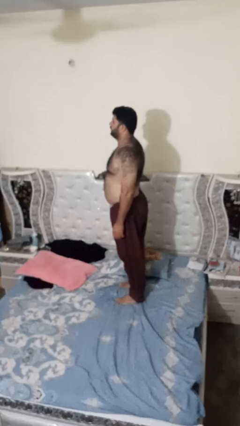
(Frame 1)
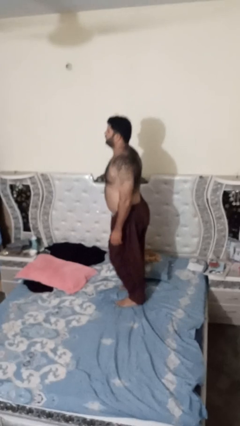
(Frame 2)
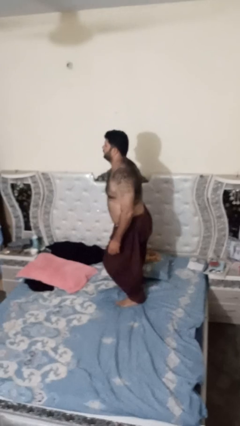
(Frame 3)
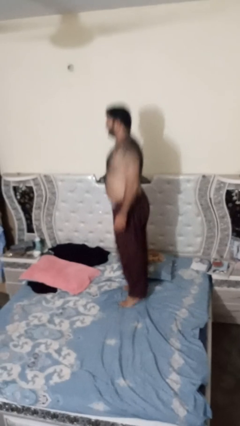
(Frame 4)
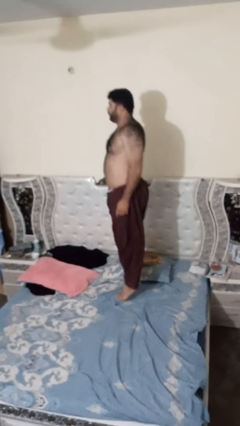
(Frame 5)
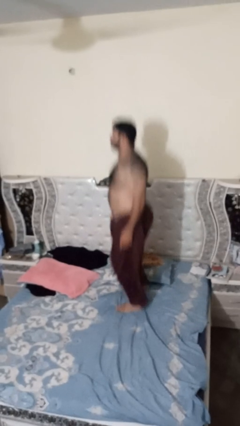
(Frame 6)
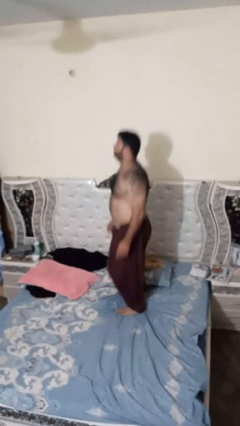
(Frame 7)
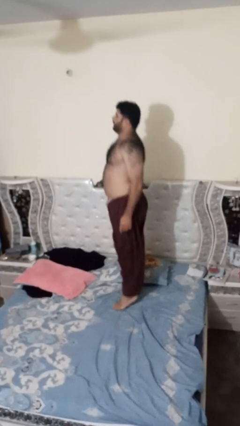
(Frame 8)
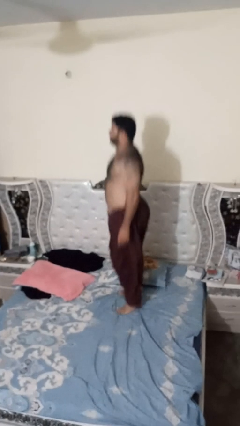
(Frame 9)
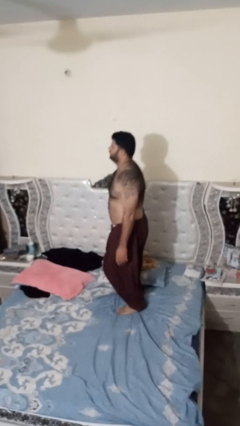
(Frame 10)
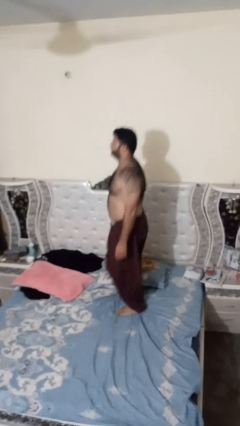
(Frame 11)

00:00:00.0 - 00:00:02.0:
person jumps on bed

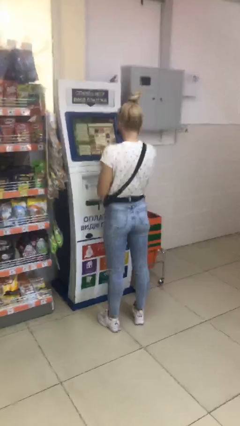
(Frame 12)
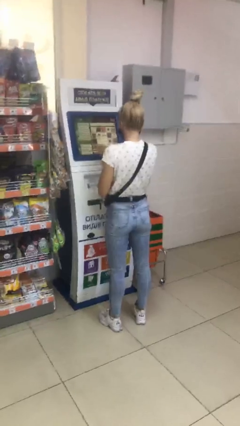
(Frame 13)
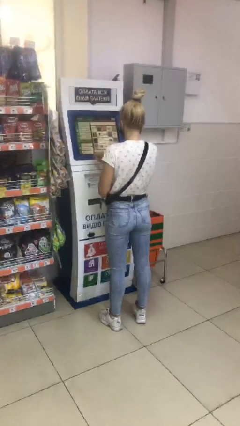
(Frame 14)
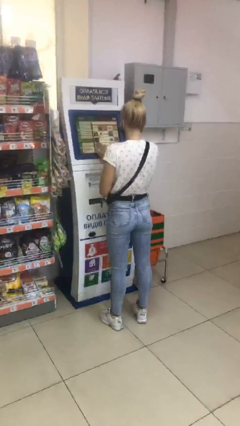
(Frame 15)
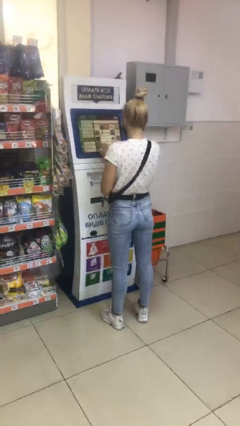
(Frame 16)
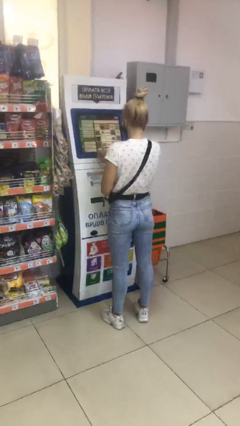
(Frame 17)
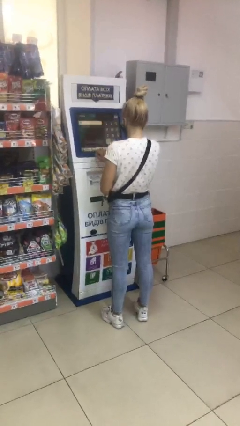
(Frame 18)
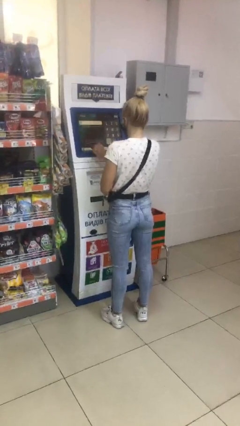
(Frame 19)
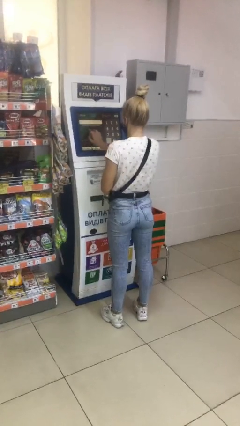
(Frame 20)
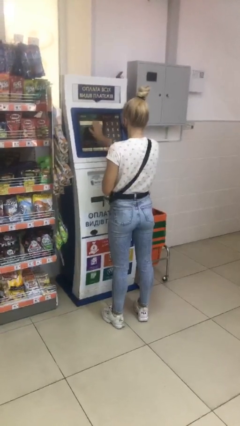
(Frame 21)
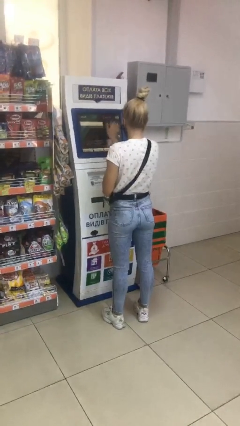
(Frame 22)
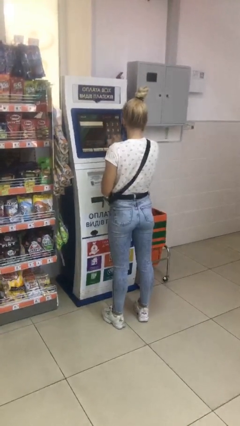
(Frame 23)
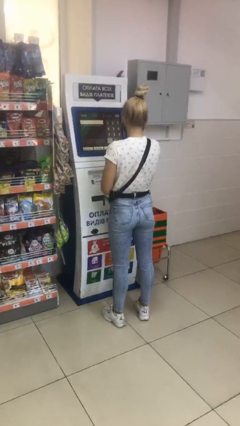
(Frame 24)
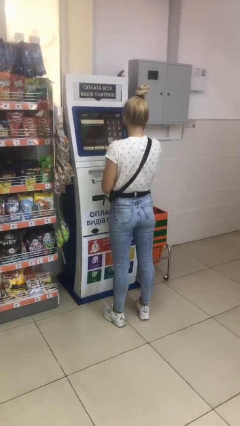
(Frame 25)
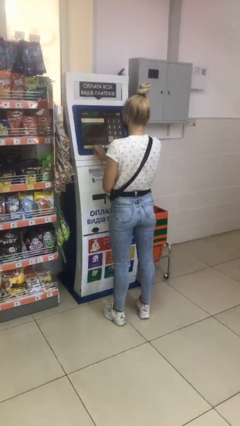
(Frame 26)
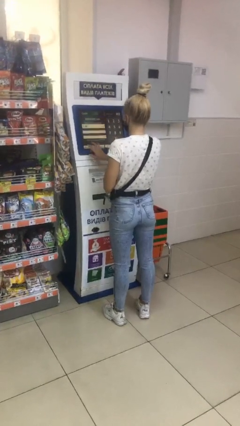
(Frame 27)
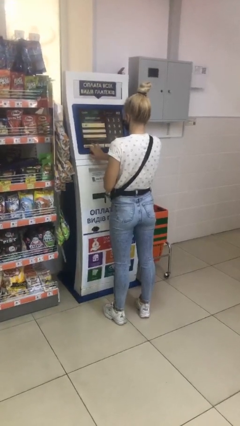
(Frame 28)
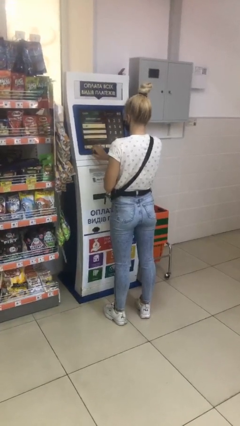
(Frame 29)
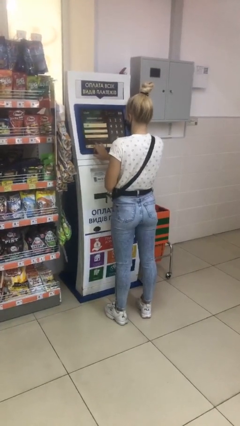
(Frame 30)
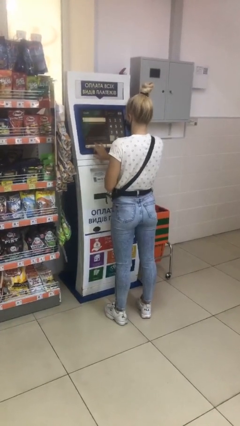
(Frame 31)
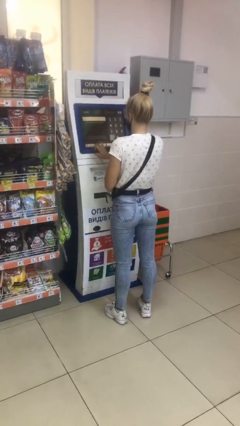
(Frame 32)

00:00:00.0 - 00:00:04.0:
person purchases from machine

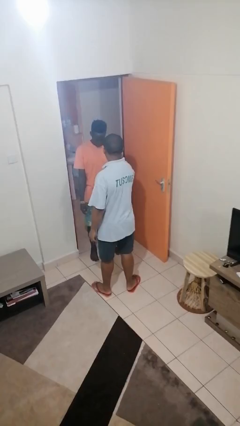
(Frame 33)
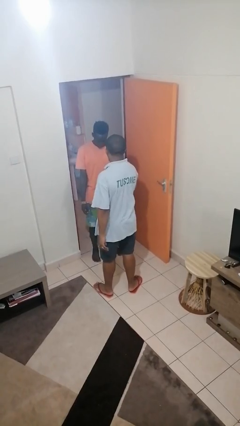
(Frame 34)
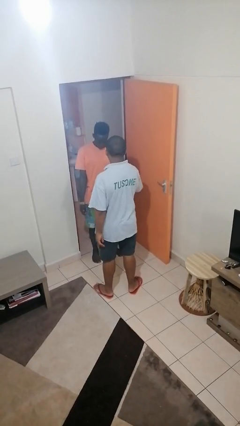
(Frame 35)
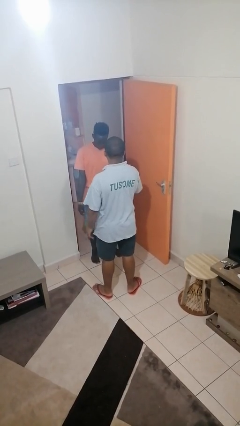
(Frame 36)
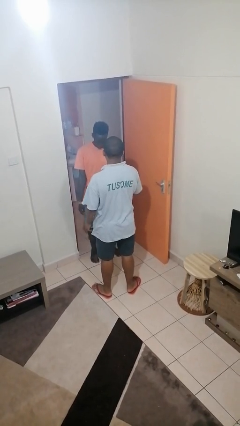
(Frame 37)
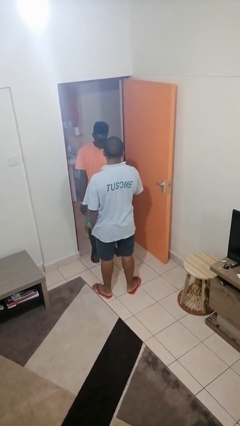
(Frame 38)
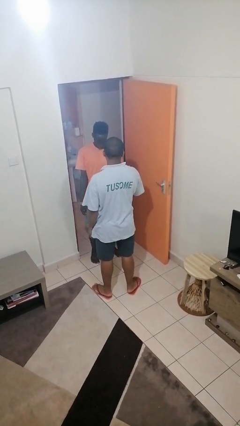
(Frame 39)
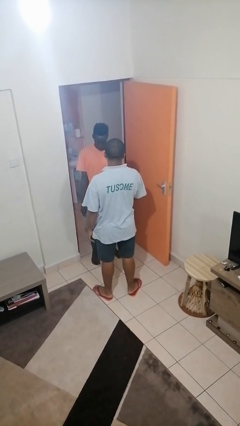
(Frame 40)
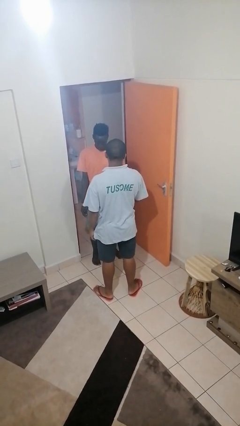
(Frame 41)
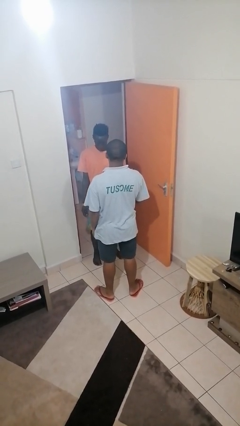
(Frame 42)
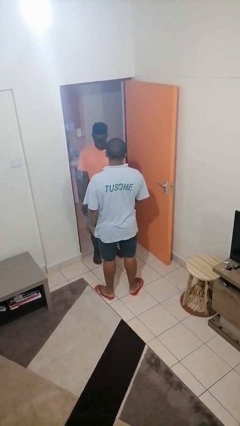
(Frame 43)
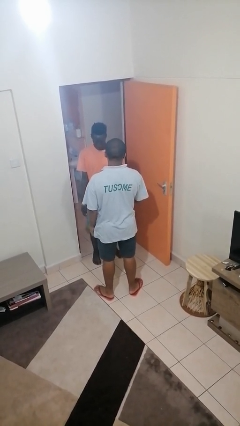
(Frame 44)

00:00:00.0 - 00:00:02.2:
person grabs person by forearm

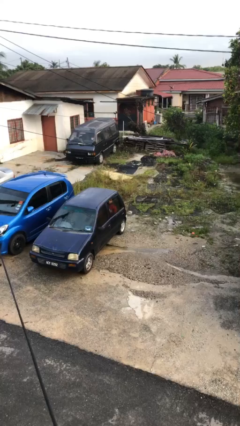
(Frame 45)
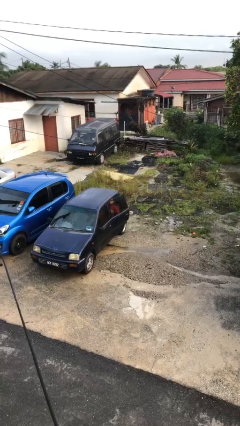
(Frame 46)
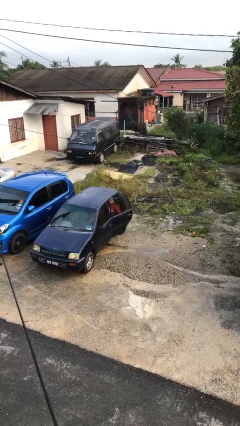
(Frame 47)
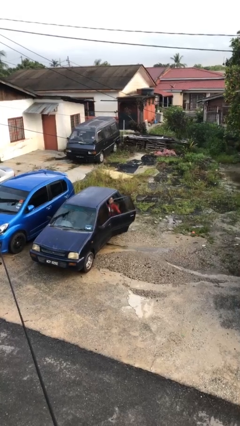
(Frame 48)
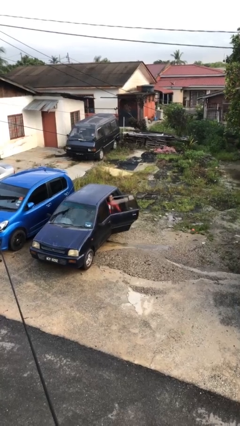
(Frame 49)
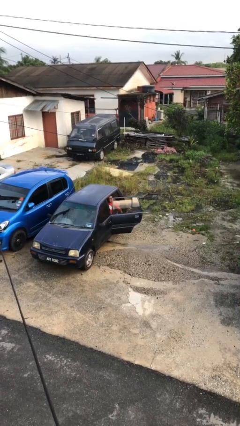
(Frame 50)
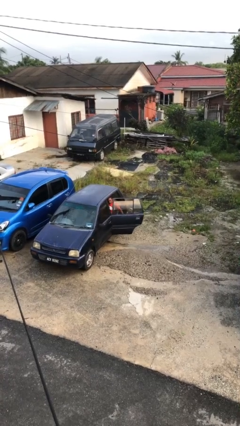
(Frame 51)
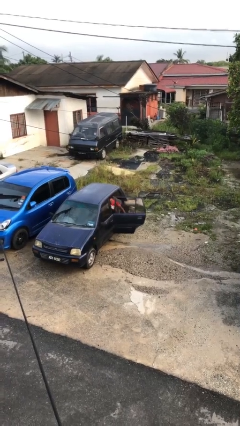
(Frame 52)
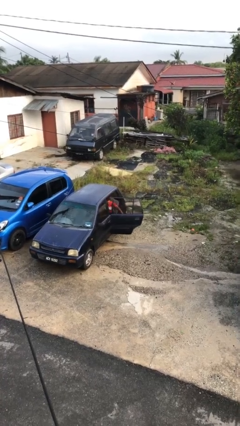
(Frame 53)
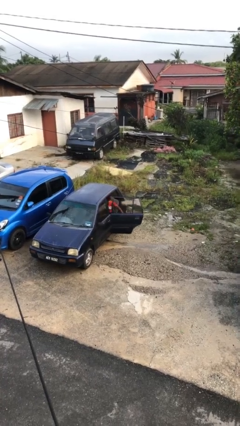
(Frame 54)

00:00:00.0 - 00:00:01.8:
person opens car door

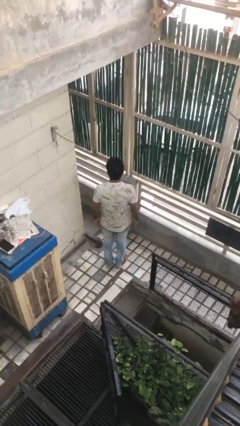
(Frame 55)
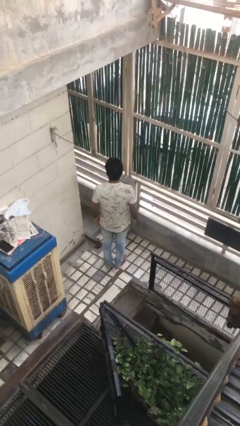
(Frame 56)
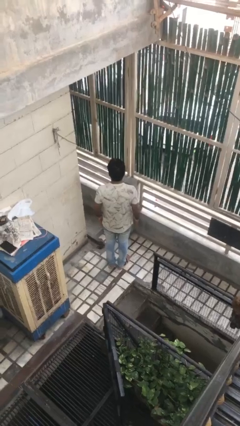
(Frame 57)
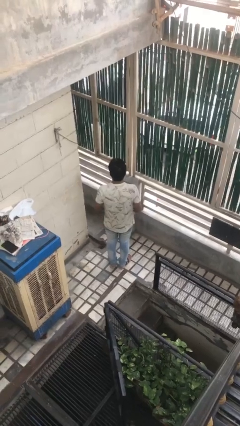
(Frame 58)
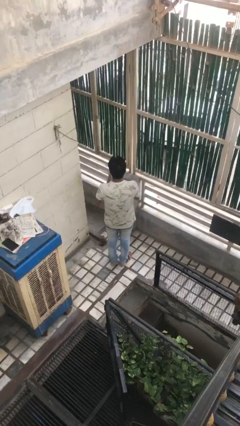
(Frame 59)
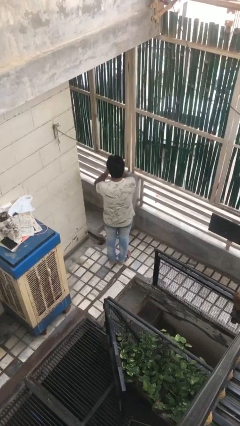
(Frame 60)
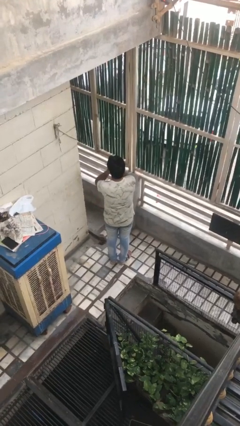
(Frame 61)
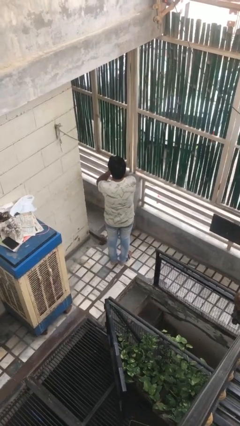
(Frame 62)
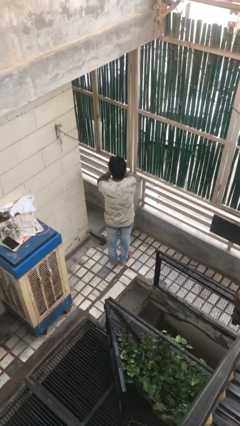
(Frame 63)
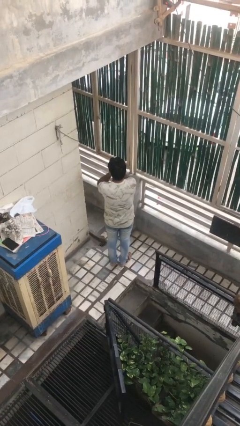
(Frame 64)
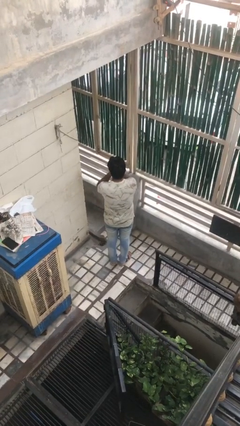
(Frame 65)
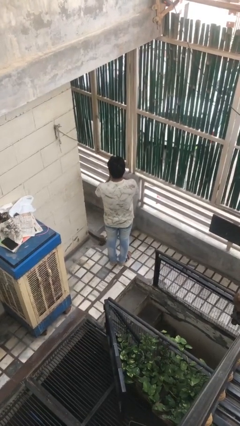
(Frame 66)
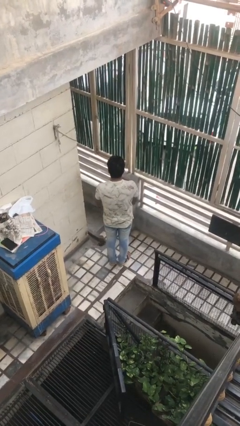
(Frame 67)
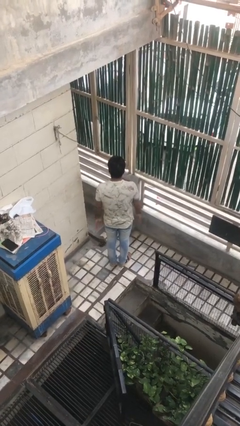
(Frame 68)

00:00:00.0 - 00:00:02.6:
person covers face with hands

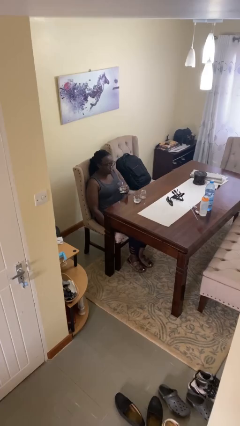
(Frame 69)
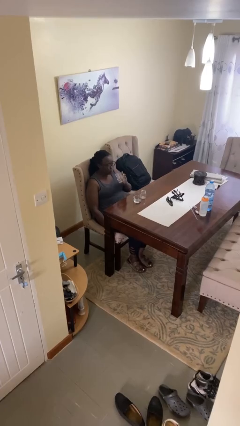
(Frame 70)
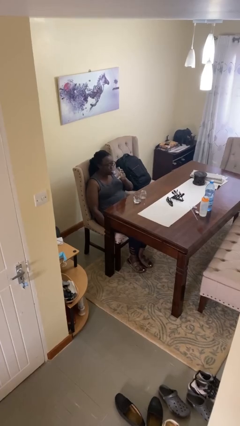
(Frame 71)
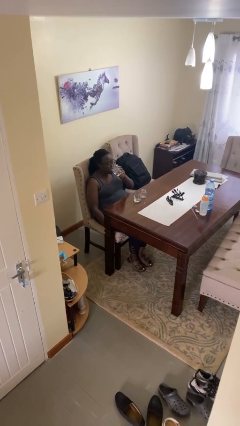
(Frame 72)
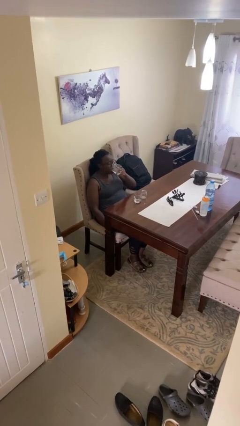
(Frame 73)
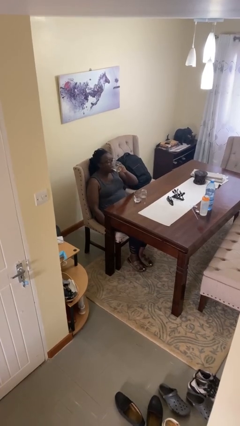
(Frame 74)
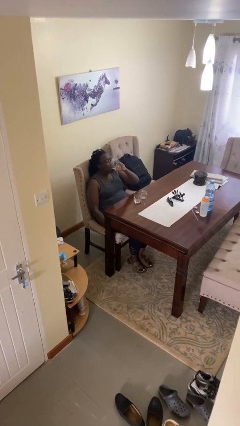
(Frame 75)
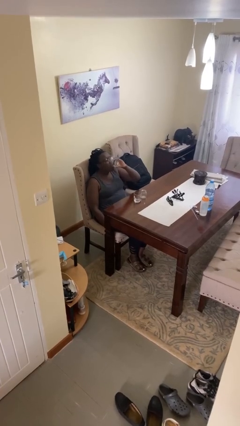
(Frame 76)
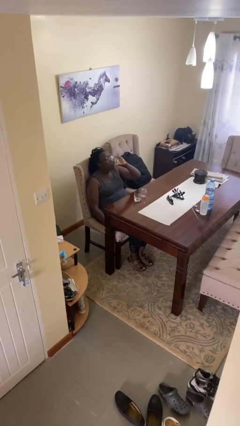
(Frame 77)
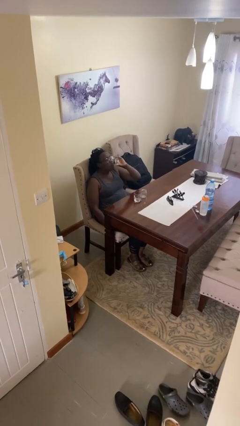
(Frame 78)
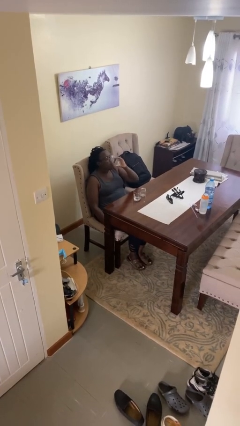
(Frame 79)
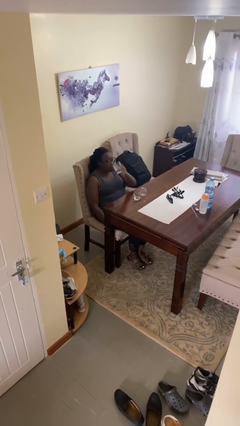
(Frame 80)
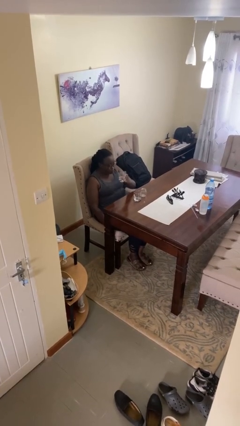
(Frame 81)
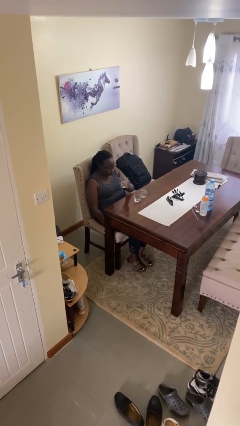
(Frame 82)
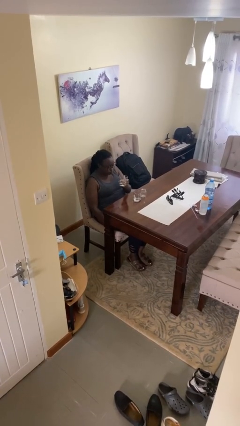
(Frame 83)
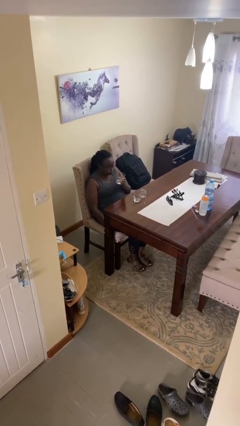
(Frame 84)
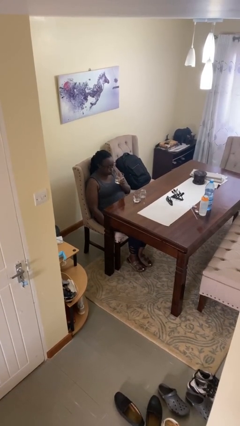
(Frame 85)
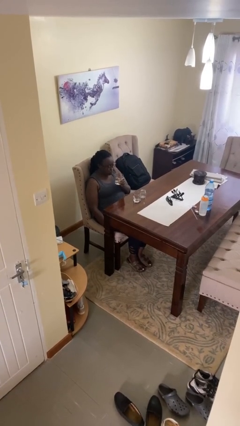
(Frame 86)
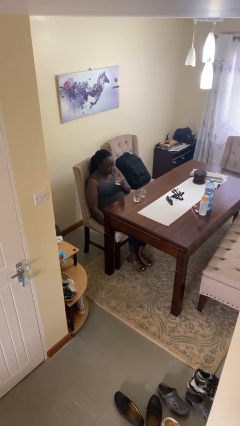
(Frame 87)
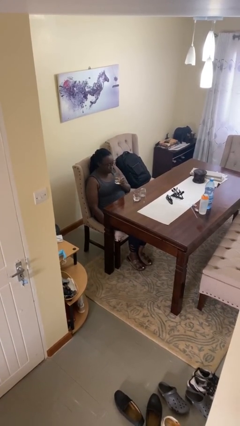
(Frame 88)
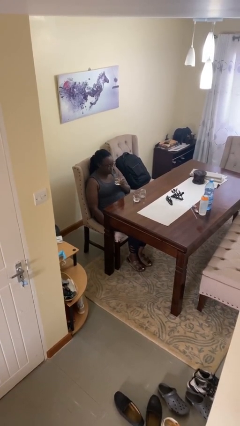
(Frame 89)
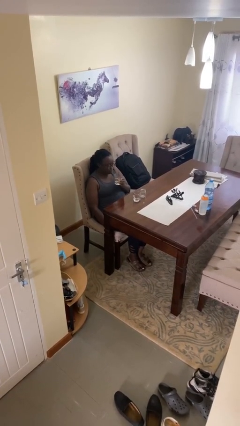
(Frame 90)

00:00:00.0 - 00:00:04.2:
person drinks from shotglass

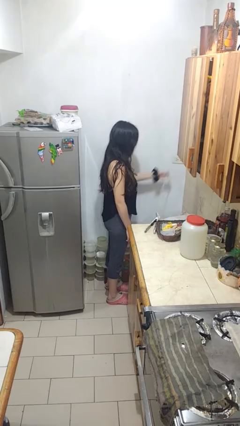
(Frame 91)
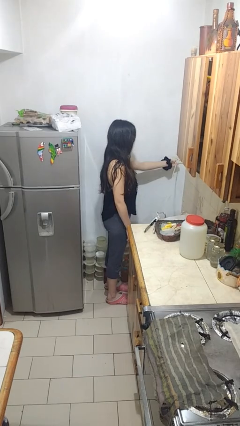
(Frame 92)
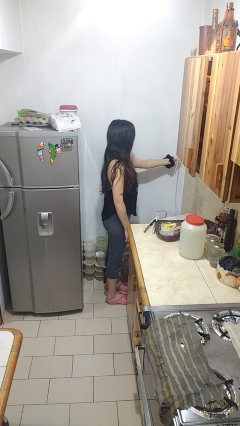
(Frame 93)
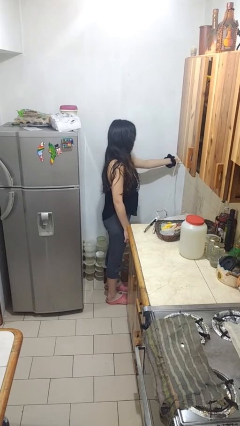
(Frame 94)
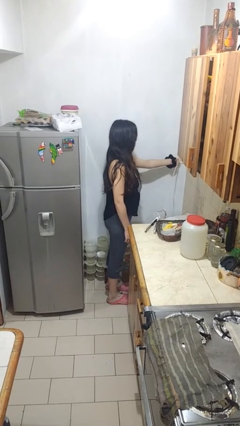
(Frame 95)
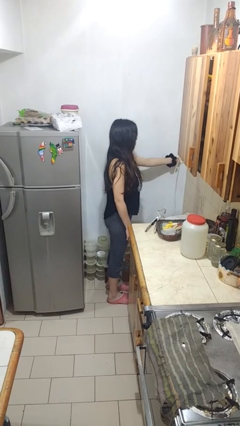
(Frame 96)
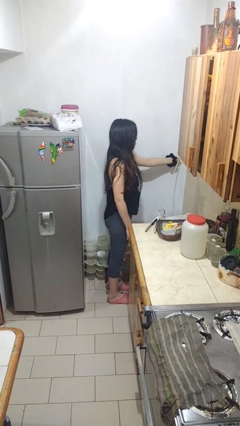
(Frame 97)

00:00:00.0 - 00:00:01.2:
person plugs into electrical socket
